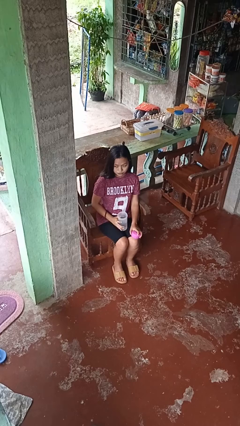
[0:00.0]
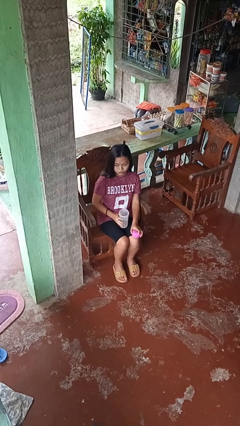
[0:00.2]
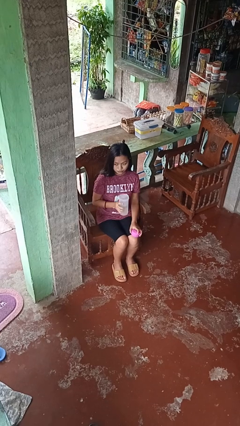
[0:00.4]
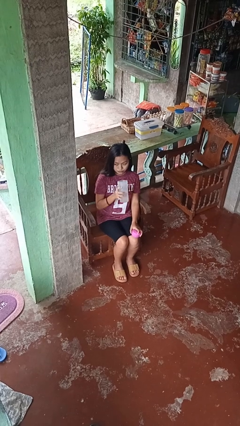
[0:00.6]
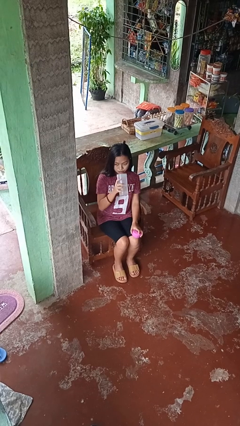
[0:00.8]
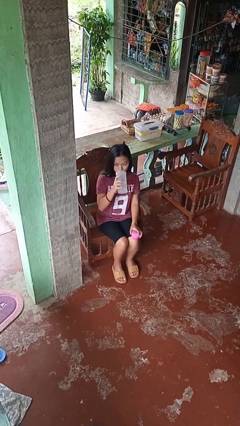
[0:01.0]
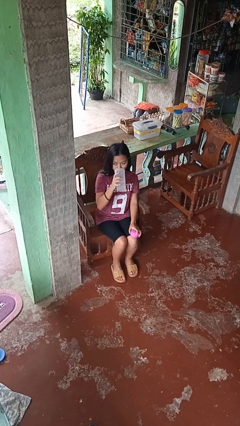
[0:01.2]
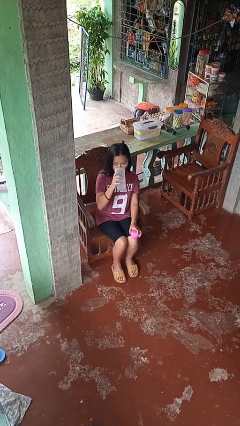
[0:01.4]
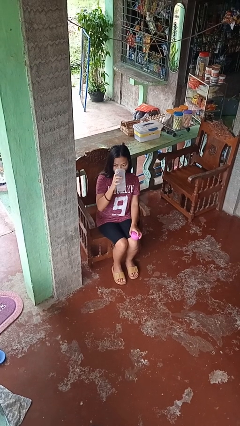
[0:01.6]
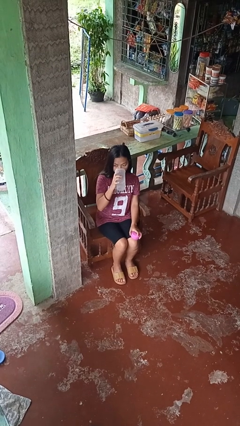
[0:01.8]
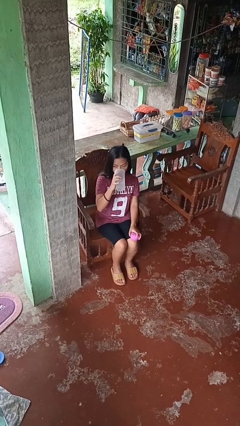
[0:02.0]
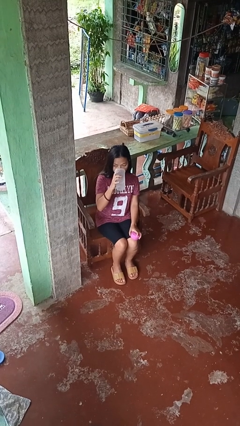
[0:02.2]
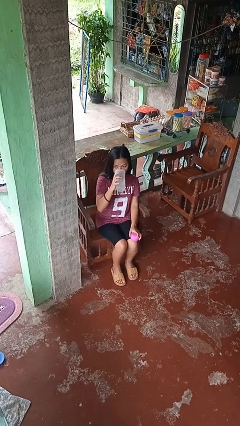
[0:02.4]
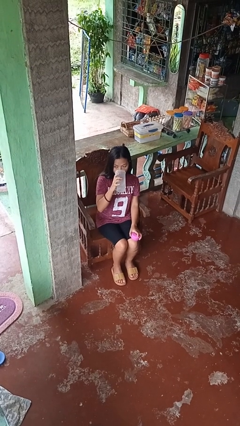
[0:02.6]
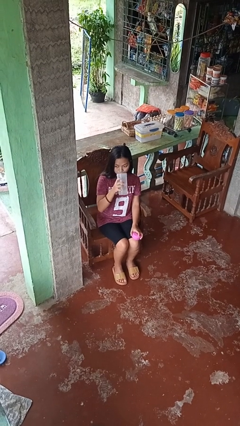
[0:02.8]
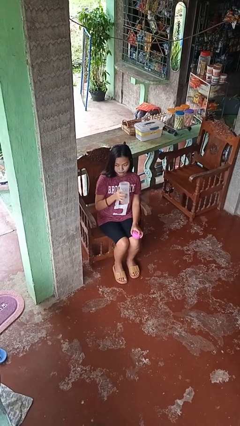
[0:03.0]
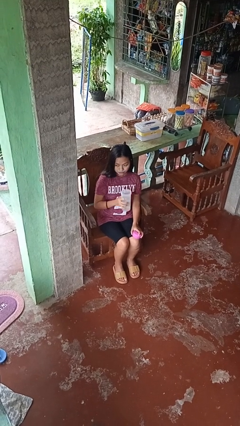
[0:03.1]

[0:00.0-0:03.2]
person drinks from bottle

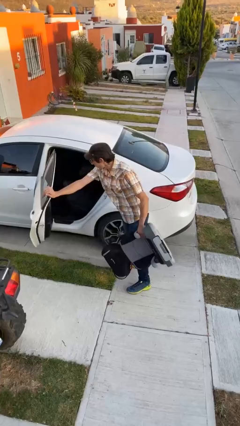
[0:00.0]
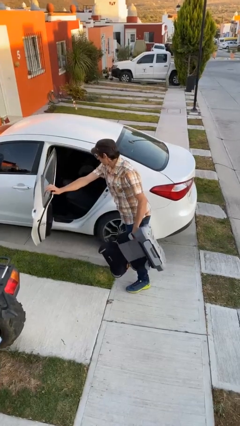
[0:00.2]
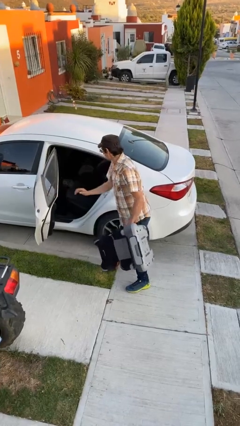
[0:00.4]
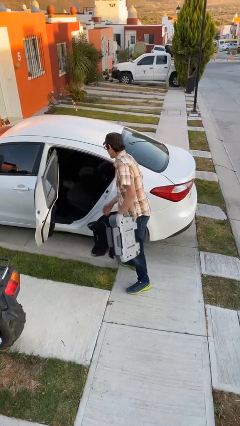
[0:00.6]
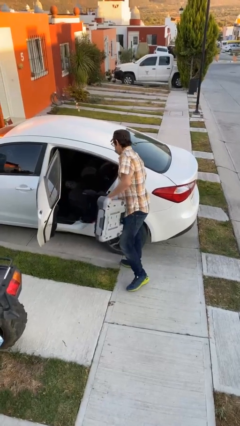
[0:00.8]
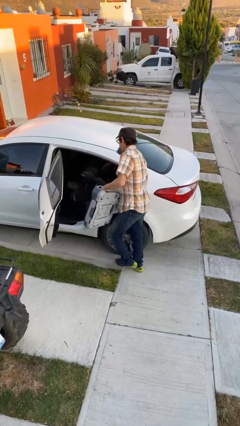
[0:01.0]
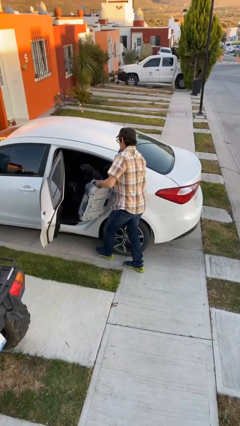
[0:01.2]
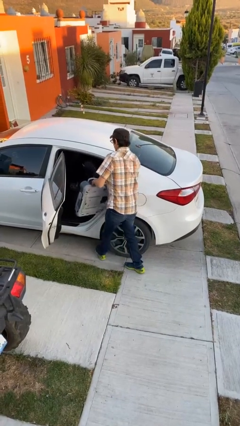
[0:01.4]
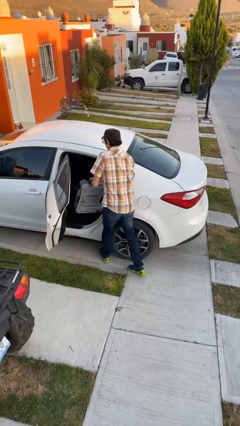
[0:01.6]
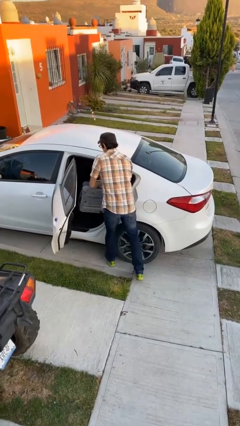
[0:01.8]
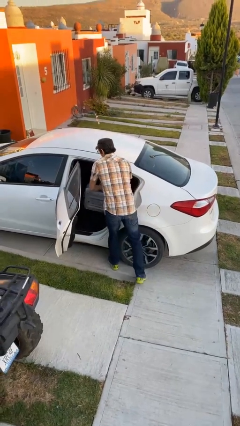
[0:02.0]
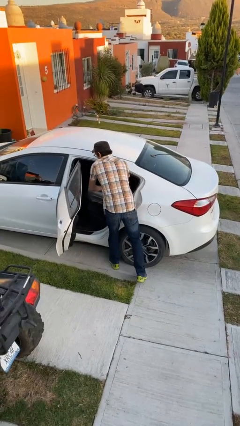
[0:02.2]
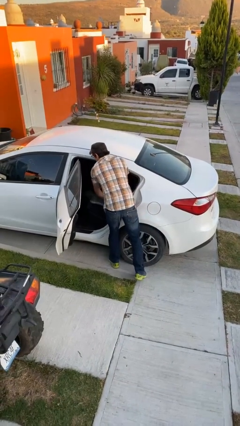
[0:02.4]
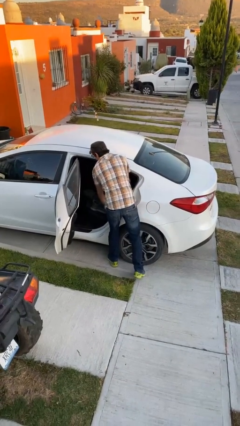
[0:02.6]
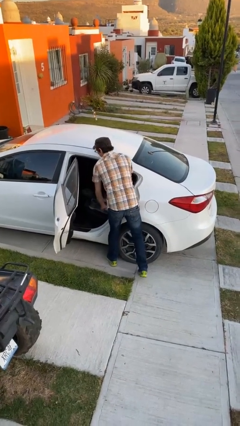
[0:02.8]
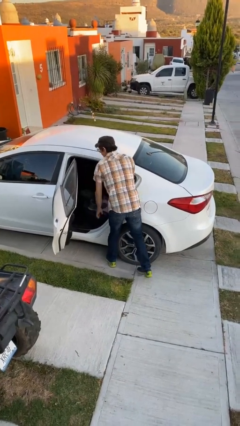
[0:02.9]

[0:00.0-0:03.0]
person loads car

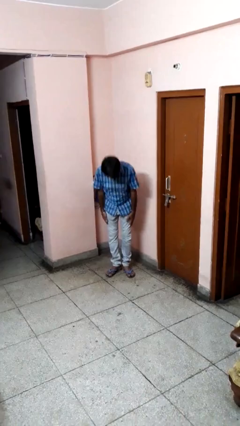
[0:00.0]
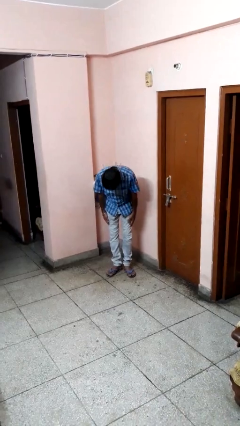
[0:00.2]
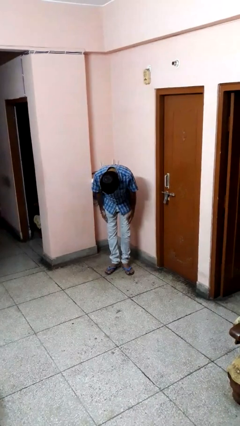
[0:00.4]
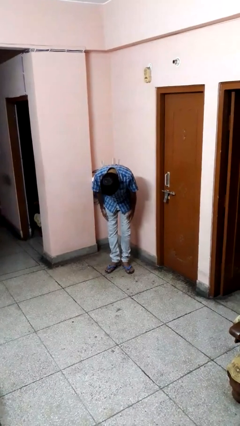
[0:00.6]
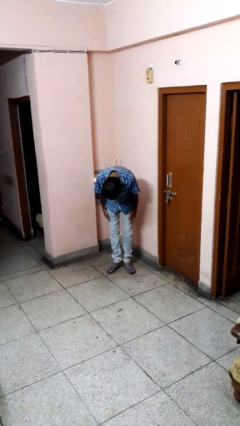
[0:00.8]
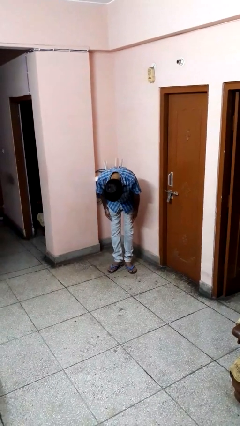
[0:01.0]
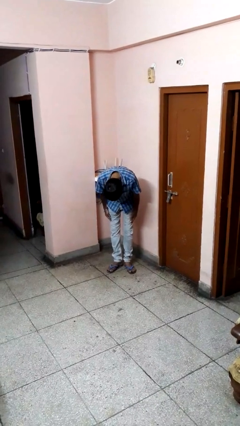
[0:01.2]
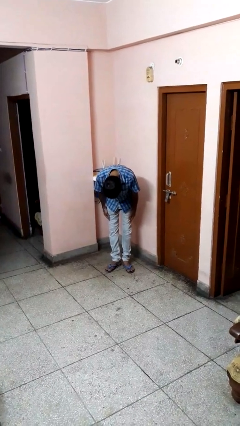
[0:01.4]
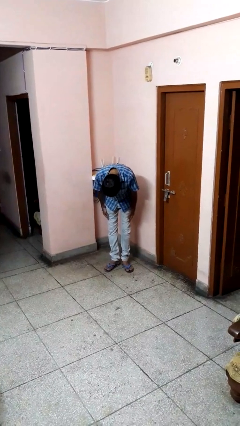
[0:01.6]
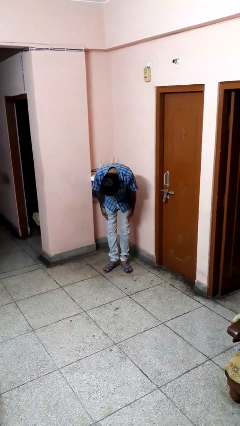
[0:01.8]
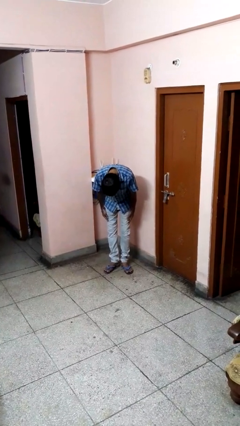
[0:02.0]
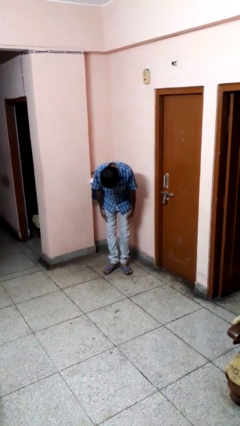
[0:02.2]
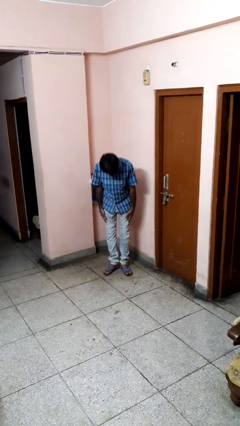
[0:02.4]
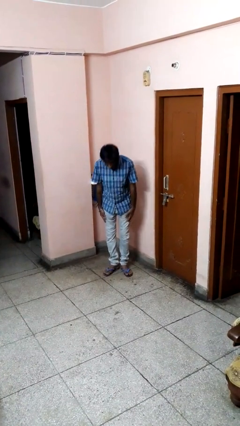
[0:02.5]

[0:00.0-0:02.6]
person bows

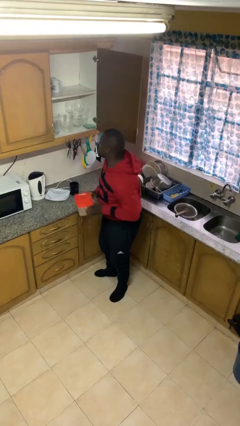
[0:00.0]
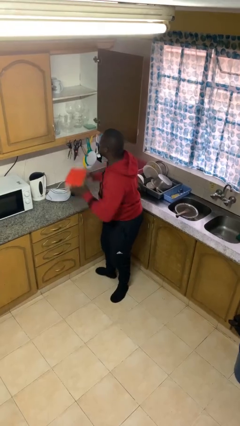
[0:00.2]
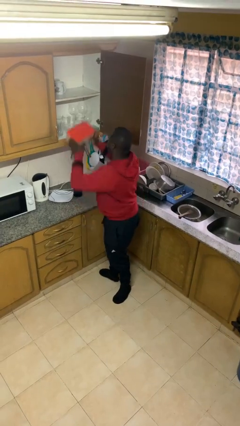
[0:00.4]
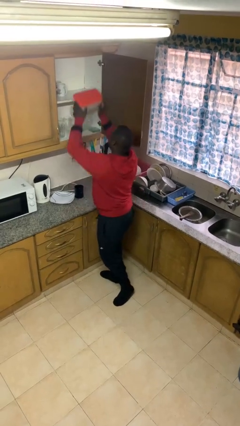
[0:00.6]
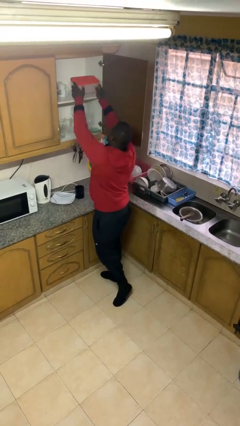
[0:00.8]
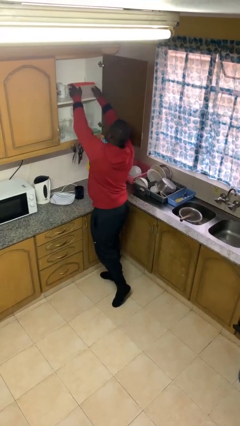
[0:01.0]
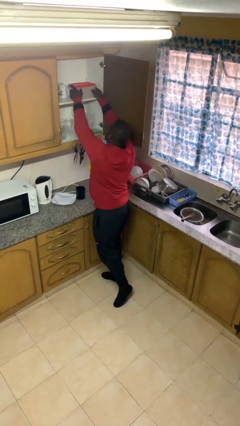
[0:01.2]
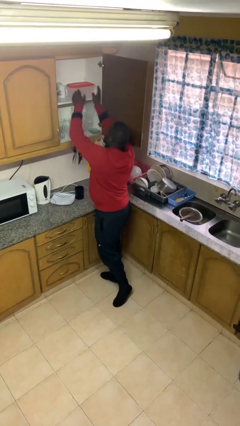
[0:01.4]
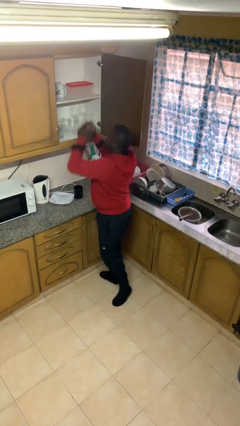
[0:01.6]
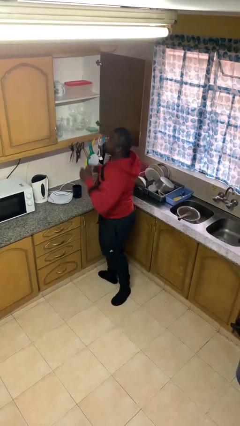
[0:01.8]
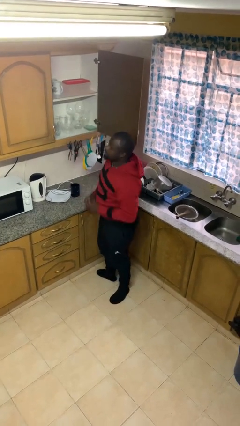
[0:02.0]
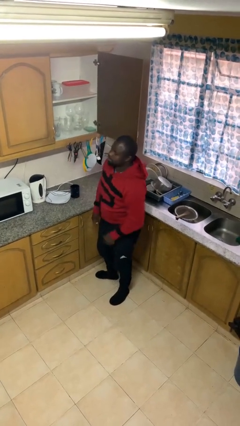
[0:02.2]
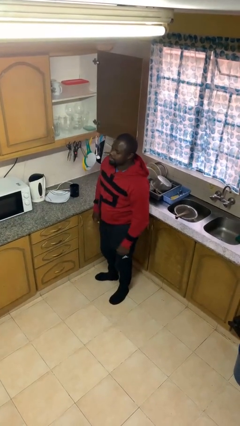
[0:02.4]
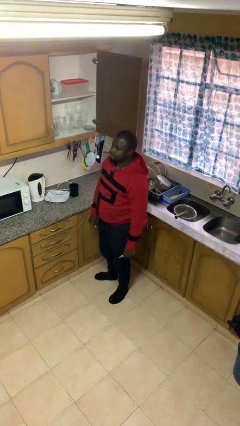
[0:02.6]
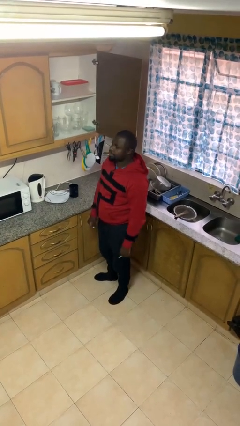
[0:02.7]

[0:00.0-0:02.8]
person puts down object into cabinet

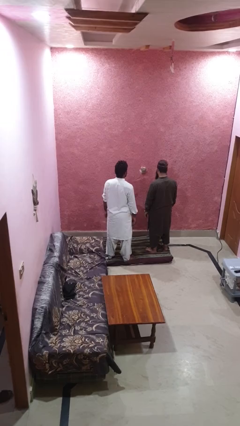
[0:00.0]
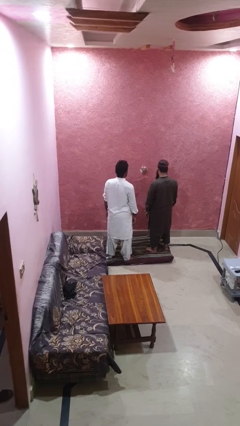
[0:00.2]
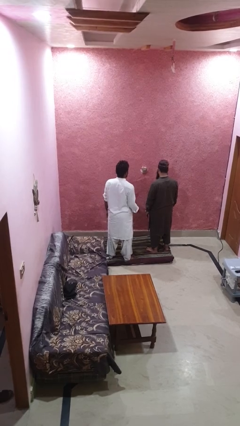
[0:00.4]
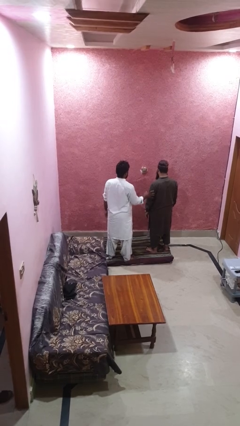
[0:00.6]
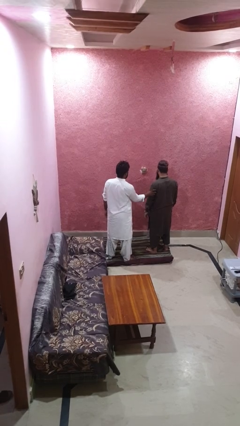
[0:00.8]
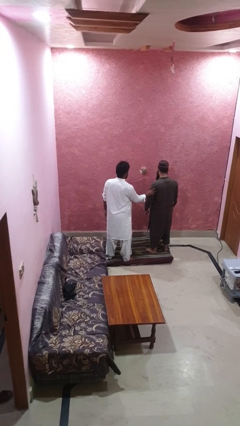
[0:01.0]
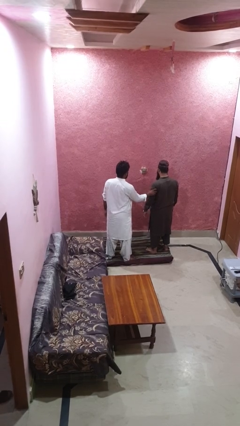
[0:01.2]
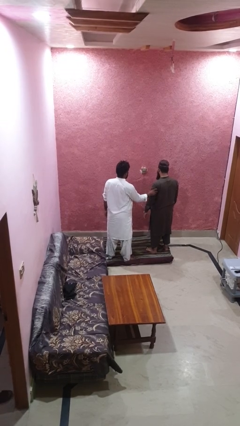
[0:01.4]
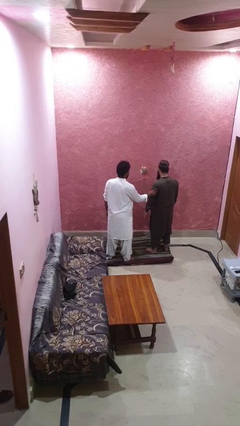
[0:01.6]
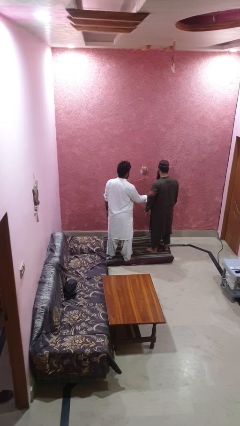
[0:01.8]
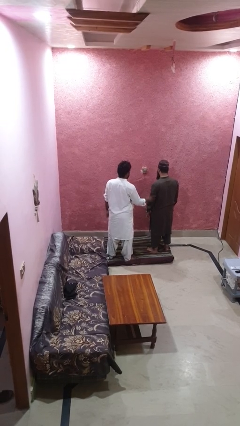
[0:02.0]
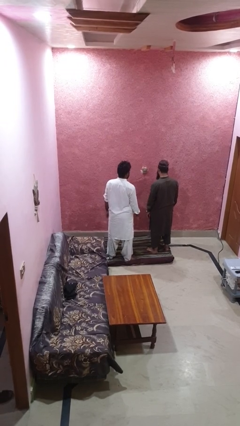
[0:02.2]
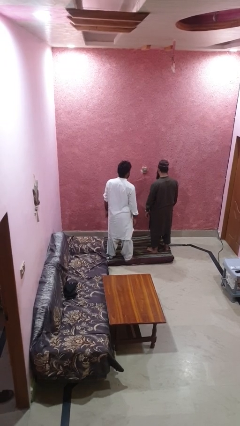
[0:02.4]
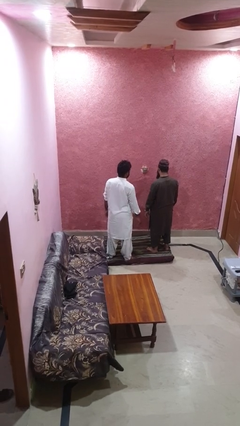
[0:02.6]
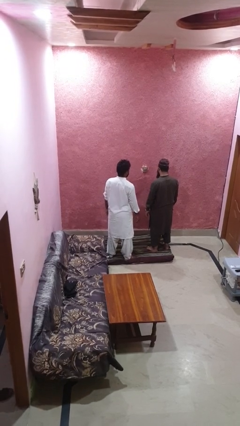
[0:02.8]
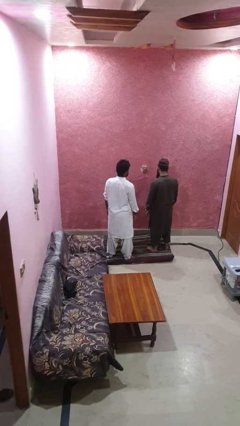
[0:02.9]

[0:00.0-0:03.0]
person grabs person by bicep

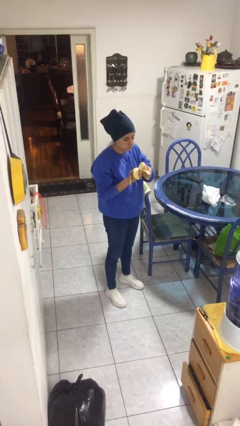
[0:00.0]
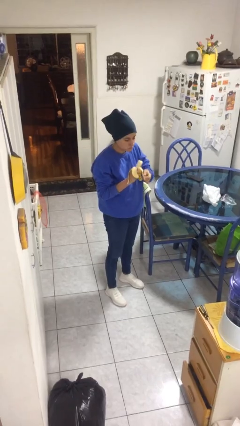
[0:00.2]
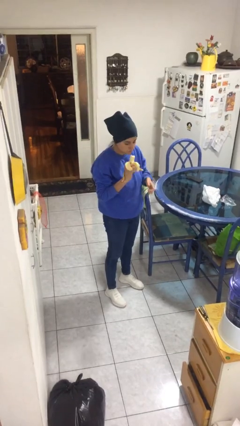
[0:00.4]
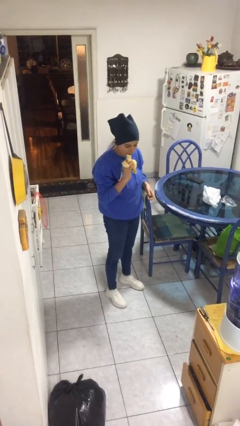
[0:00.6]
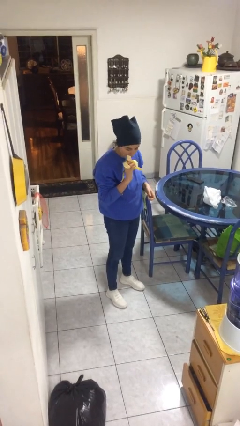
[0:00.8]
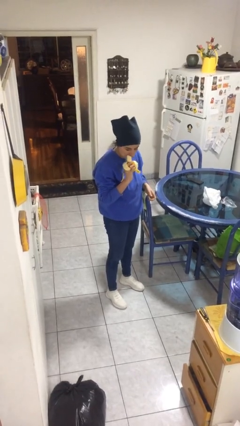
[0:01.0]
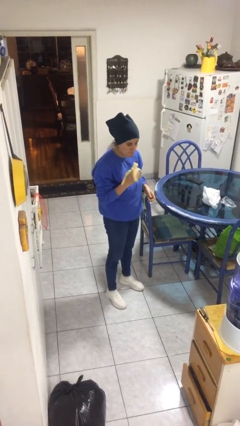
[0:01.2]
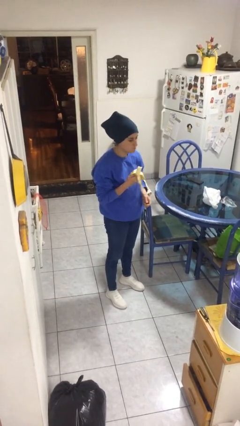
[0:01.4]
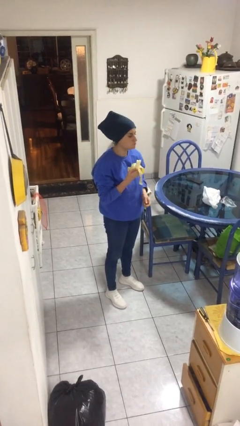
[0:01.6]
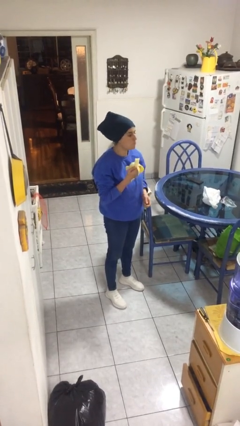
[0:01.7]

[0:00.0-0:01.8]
person eats banana

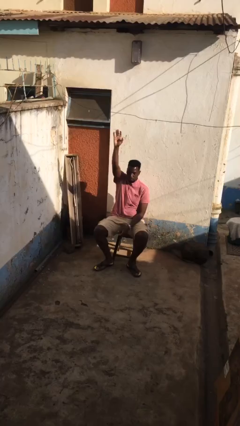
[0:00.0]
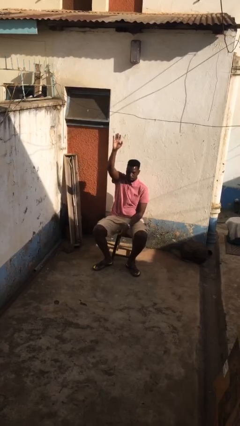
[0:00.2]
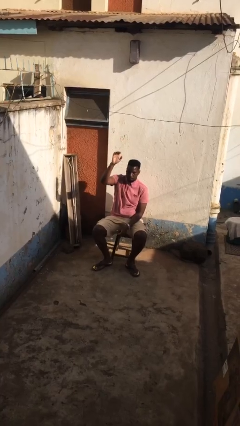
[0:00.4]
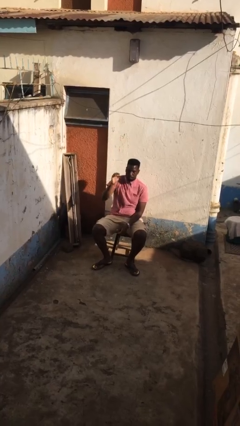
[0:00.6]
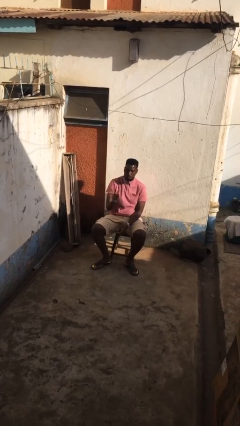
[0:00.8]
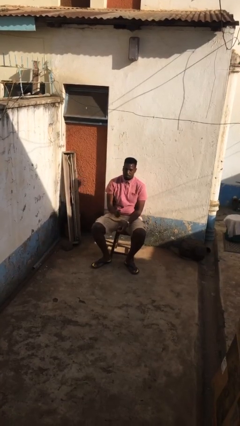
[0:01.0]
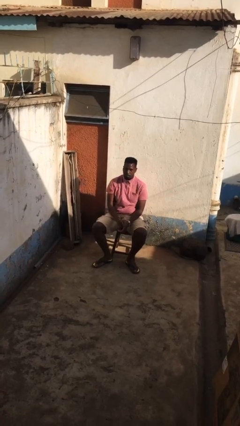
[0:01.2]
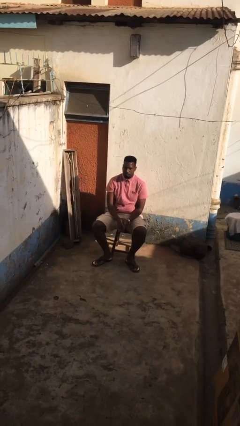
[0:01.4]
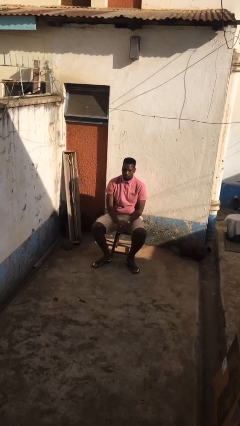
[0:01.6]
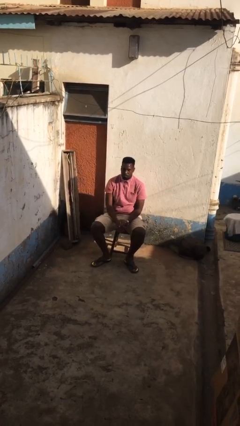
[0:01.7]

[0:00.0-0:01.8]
person gestures lower hand
